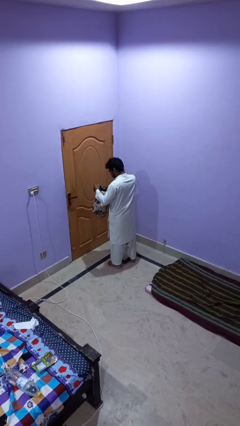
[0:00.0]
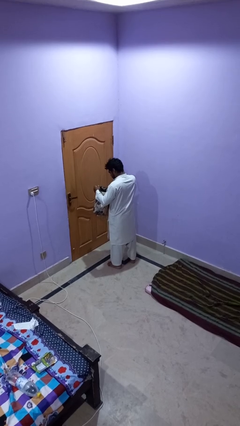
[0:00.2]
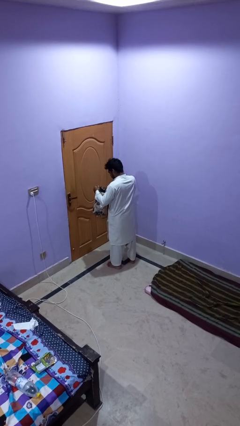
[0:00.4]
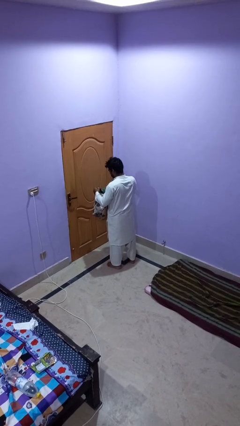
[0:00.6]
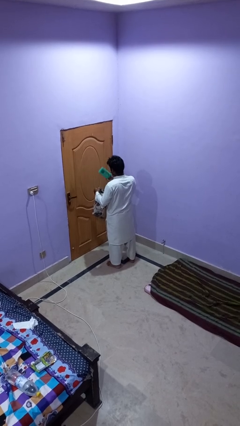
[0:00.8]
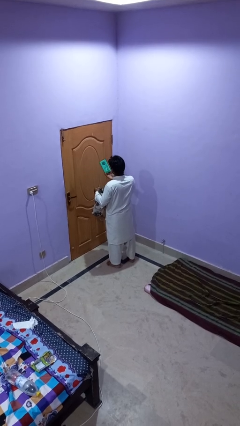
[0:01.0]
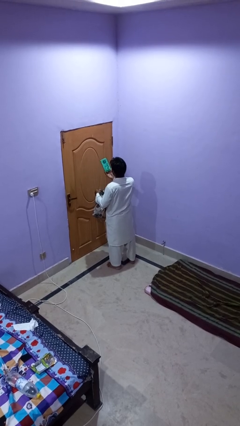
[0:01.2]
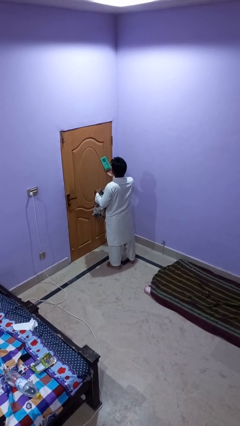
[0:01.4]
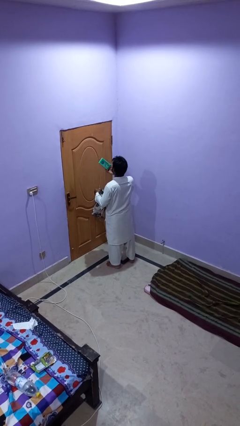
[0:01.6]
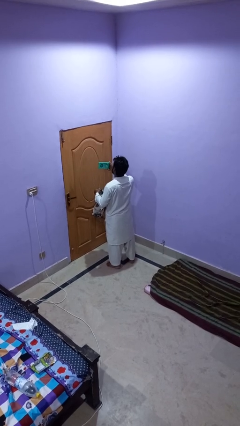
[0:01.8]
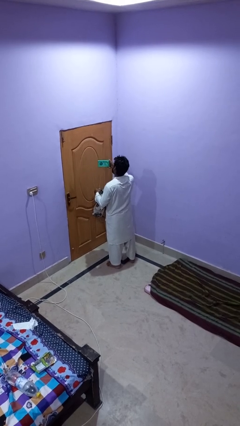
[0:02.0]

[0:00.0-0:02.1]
person takes object from backpack

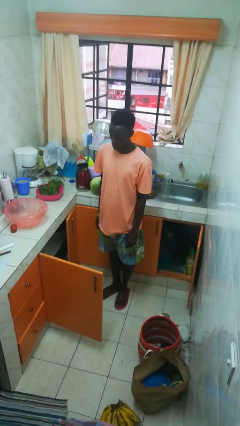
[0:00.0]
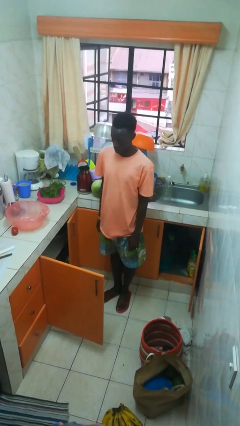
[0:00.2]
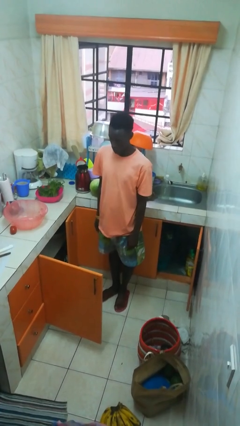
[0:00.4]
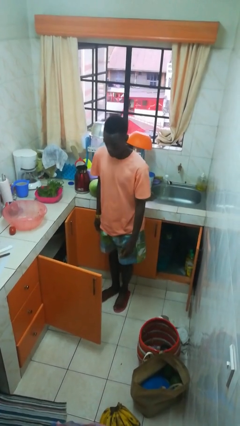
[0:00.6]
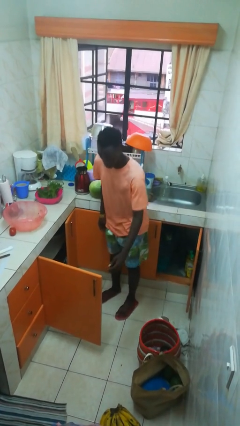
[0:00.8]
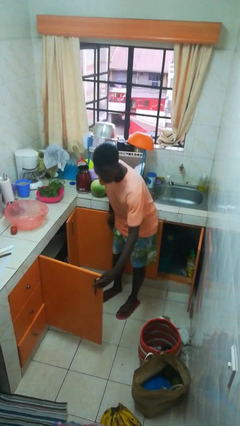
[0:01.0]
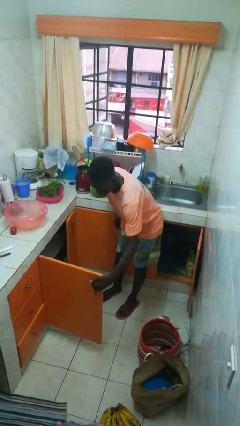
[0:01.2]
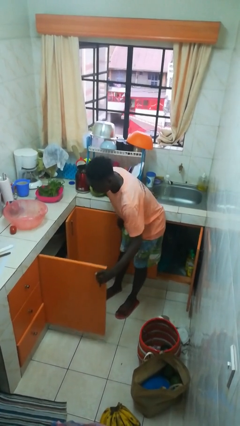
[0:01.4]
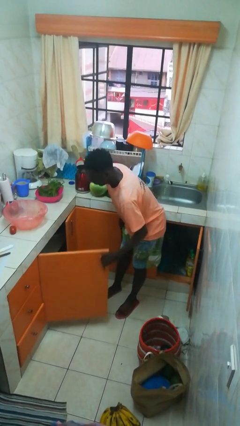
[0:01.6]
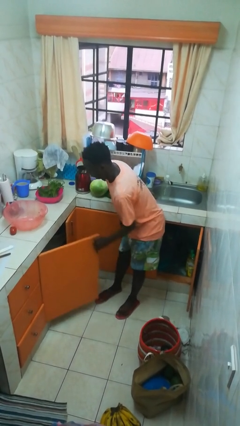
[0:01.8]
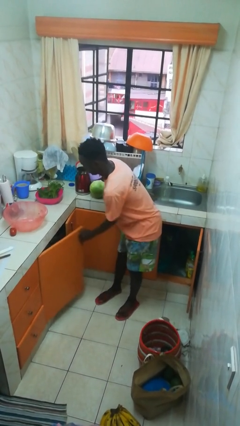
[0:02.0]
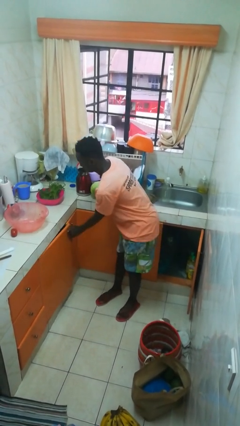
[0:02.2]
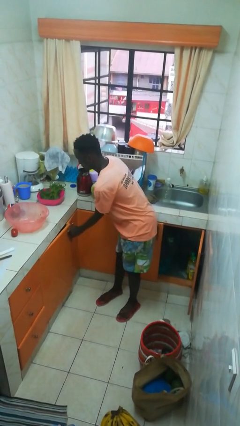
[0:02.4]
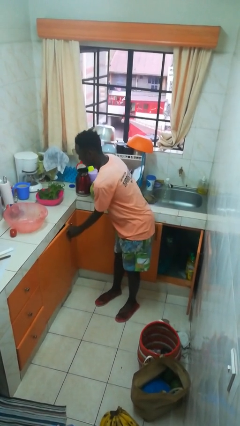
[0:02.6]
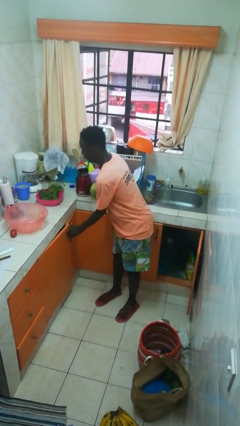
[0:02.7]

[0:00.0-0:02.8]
person closes cabinet

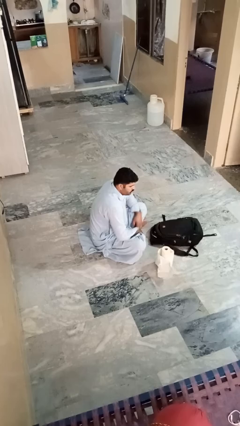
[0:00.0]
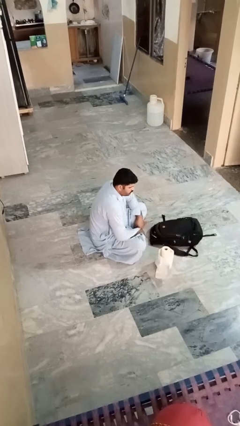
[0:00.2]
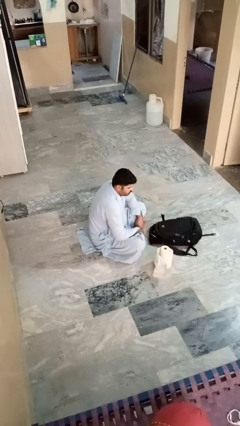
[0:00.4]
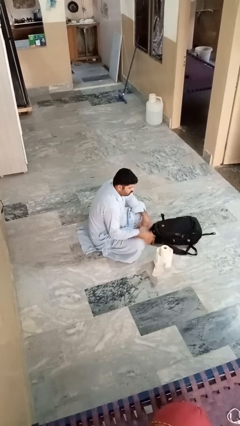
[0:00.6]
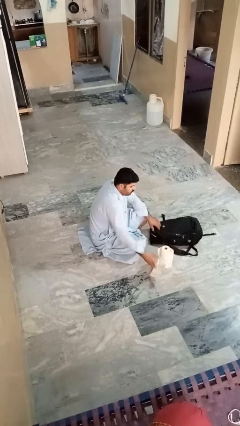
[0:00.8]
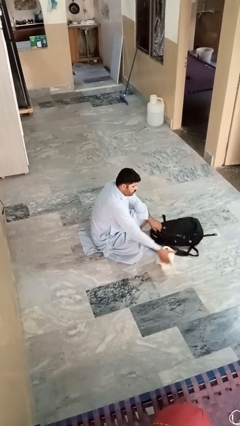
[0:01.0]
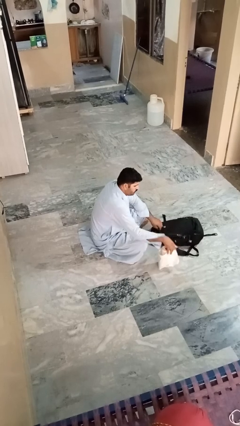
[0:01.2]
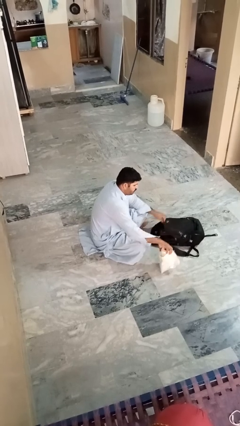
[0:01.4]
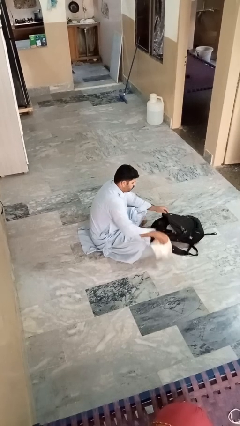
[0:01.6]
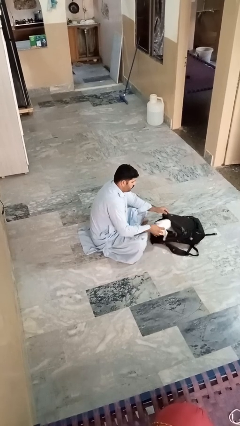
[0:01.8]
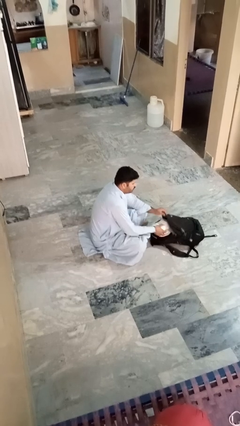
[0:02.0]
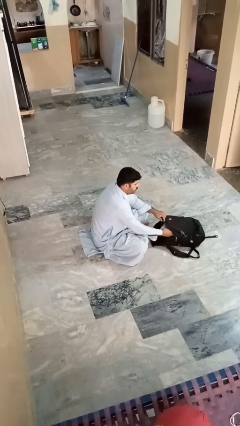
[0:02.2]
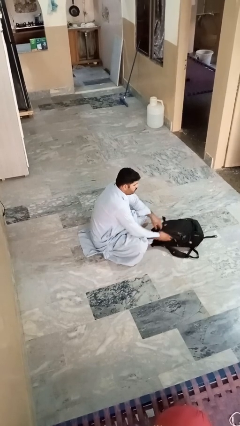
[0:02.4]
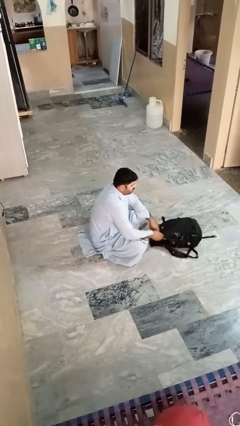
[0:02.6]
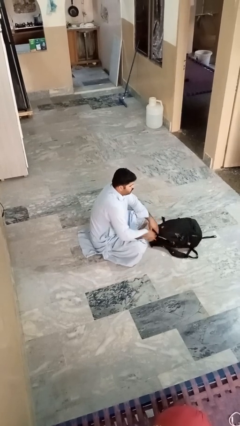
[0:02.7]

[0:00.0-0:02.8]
person puts object into bag

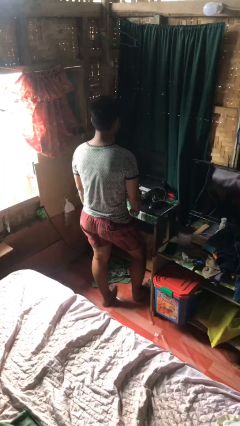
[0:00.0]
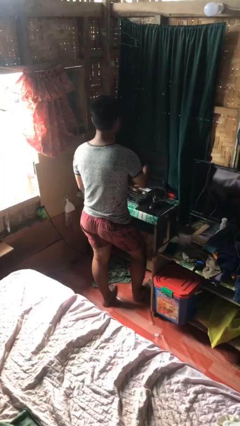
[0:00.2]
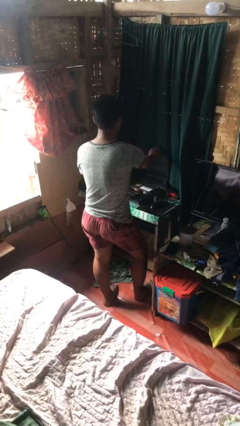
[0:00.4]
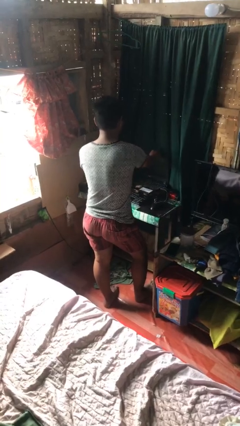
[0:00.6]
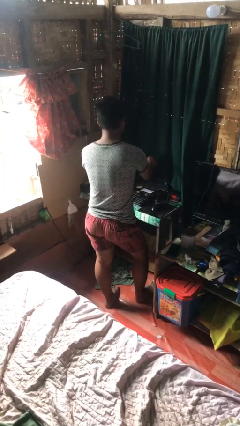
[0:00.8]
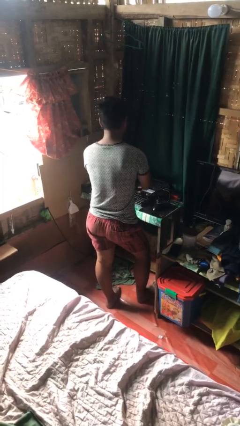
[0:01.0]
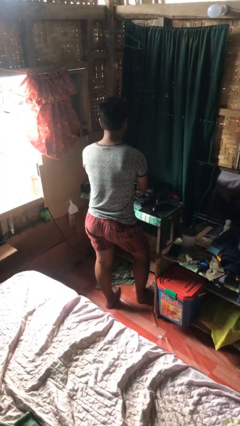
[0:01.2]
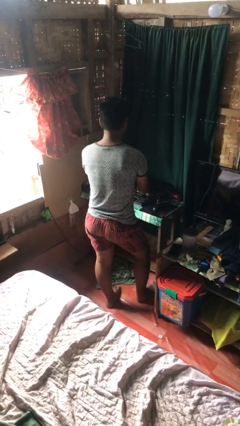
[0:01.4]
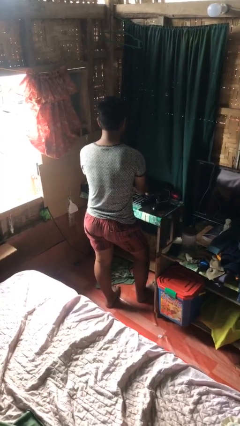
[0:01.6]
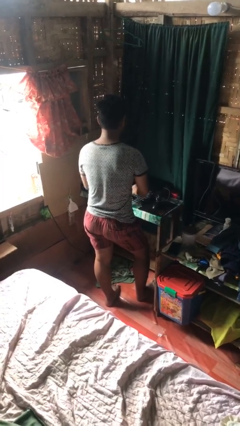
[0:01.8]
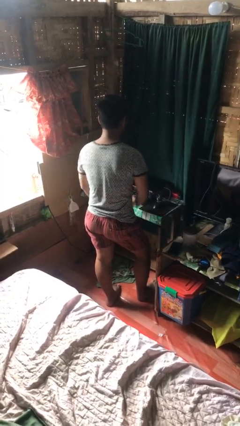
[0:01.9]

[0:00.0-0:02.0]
person closes laptop

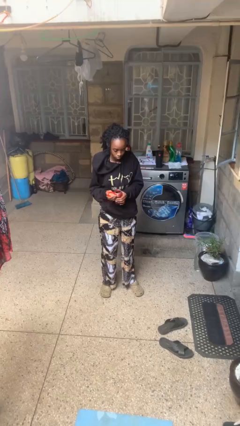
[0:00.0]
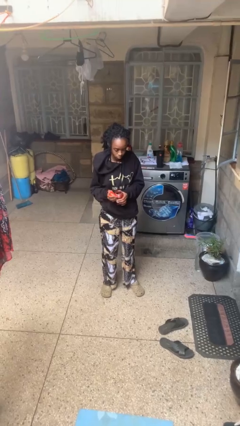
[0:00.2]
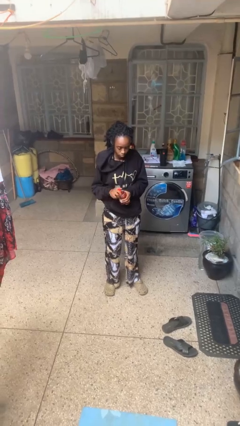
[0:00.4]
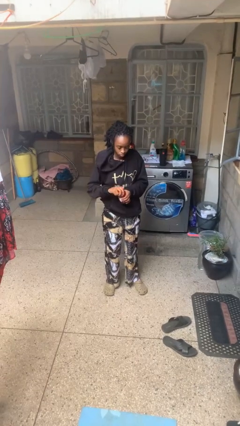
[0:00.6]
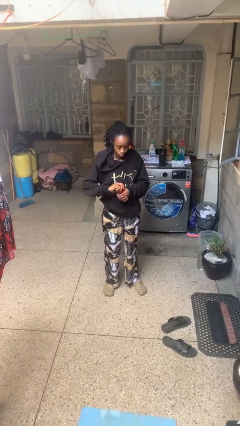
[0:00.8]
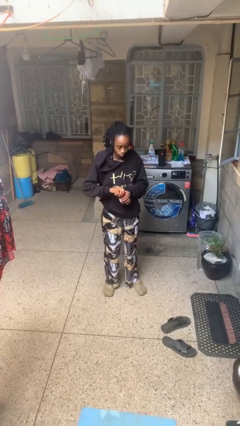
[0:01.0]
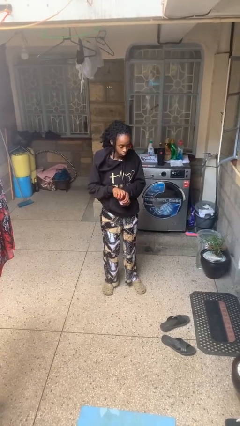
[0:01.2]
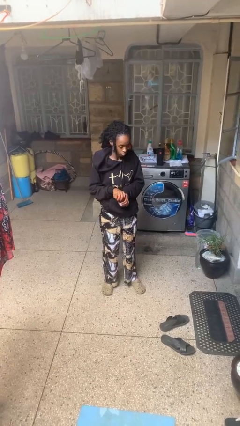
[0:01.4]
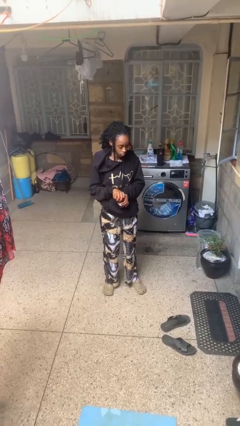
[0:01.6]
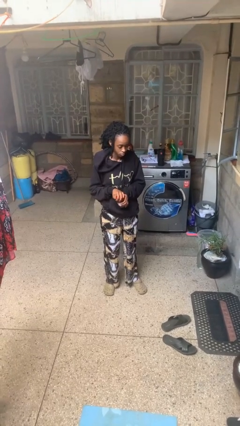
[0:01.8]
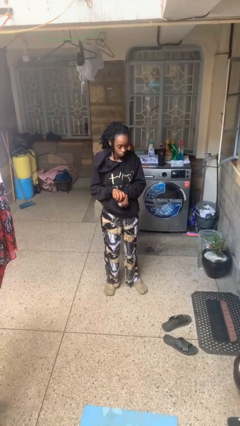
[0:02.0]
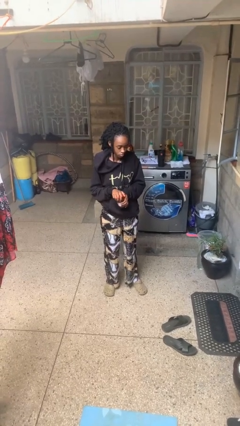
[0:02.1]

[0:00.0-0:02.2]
person closes jar

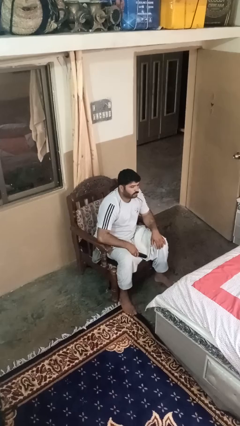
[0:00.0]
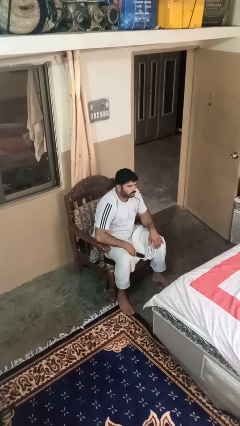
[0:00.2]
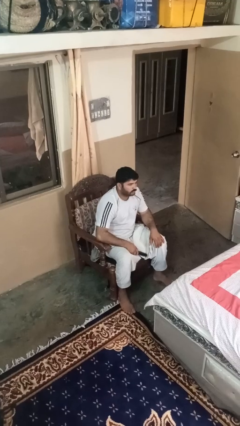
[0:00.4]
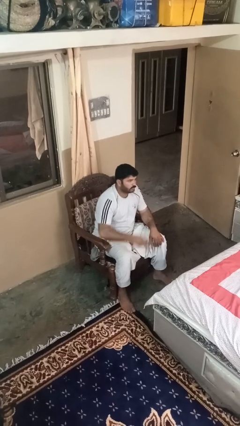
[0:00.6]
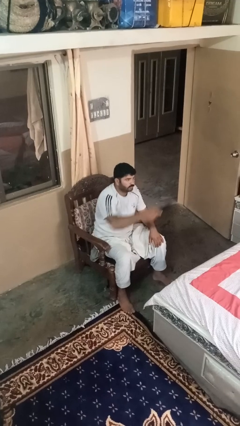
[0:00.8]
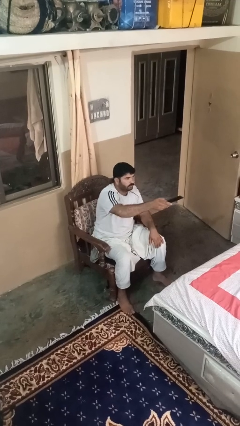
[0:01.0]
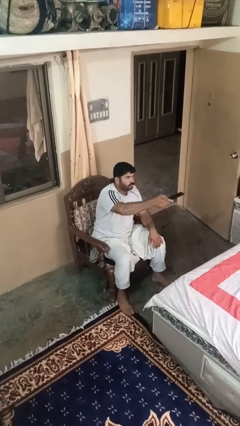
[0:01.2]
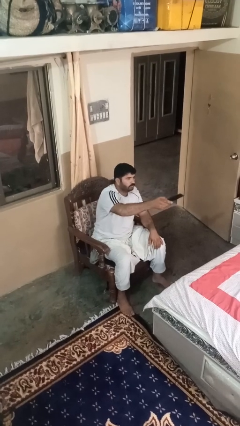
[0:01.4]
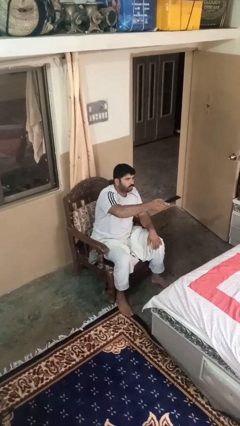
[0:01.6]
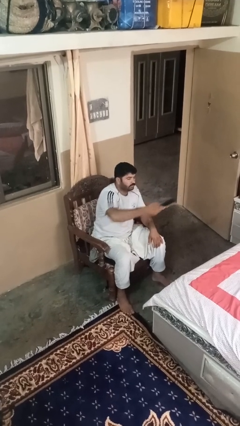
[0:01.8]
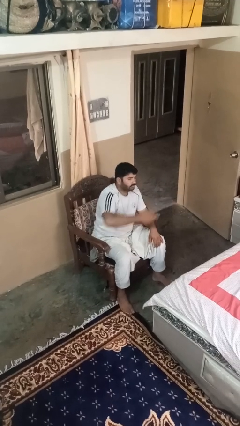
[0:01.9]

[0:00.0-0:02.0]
person uses television remote

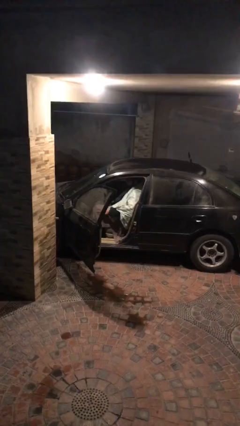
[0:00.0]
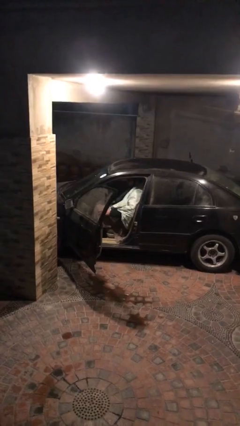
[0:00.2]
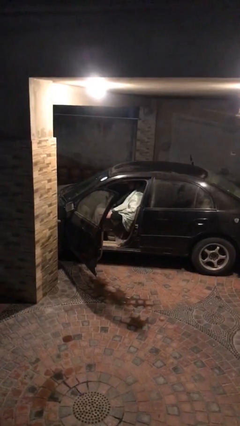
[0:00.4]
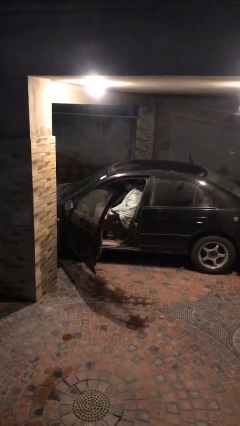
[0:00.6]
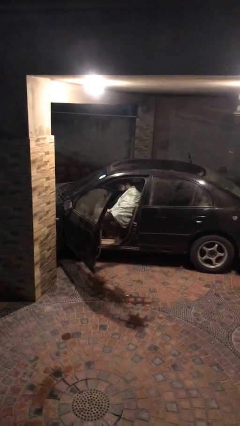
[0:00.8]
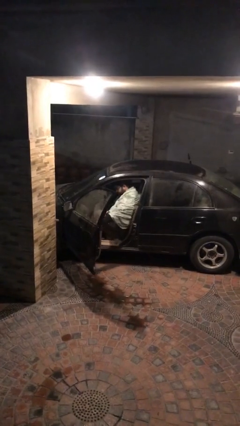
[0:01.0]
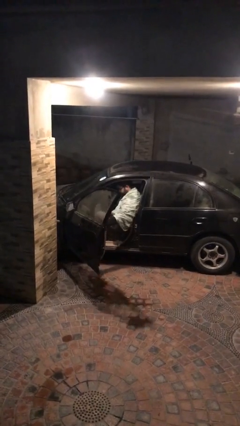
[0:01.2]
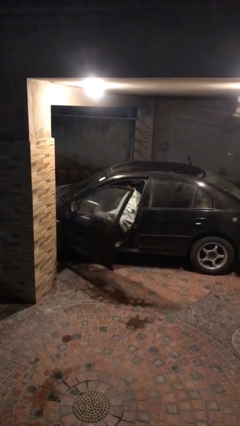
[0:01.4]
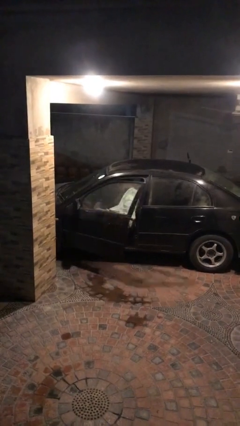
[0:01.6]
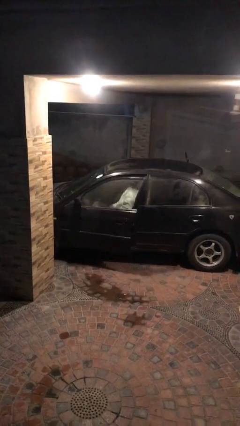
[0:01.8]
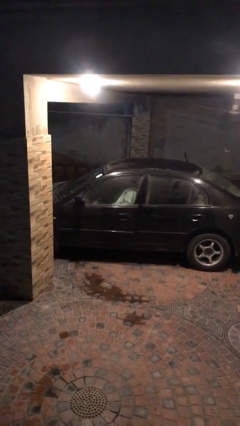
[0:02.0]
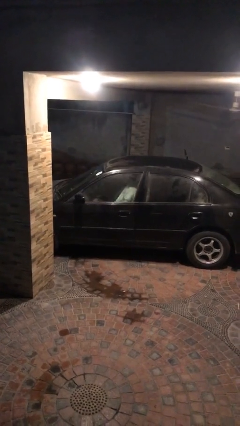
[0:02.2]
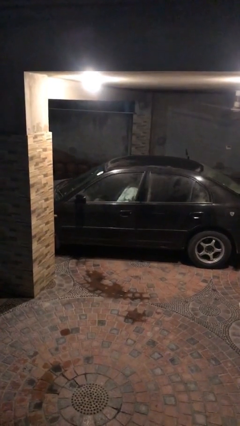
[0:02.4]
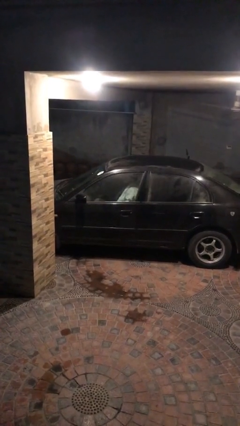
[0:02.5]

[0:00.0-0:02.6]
person closes car door

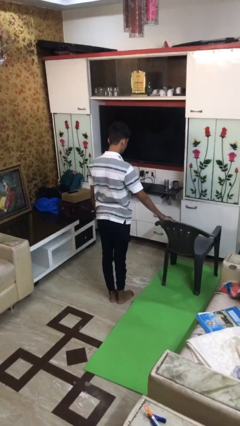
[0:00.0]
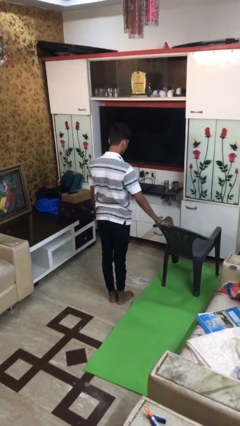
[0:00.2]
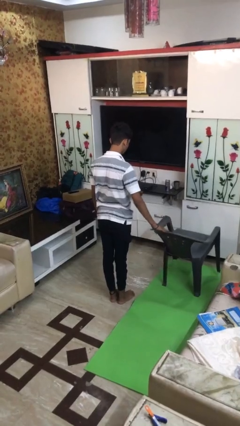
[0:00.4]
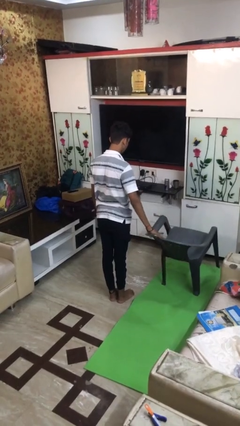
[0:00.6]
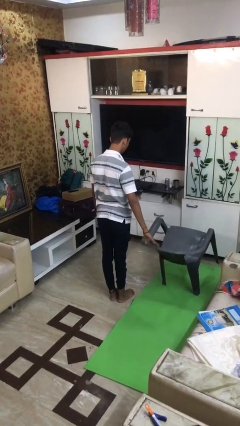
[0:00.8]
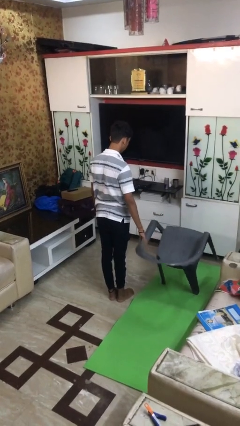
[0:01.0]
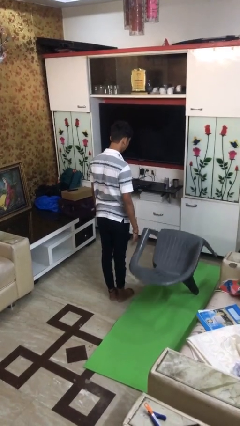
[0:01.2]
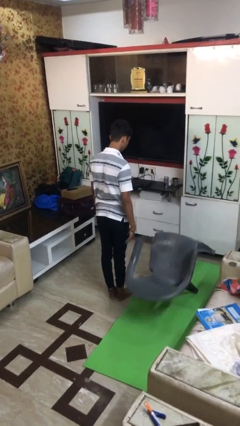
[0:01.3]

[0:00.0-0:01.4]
person knocks over furniture
